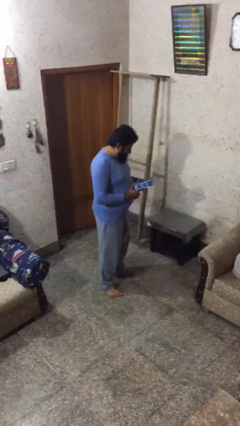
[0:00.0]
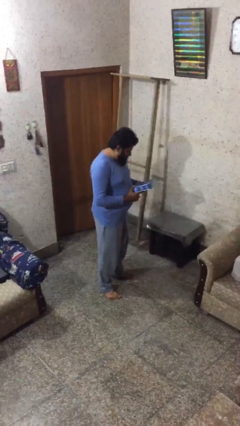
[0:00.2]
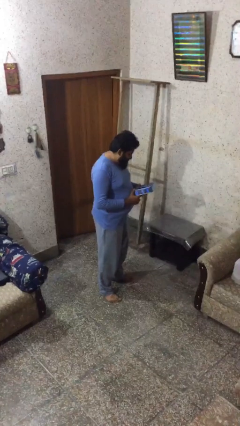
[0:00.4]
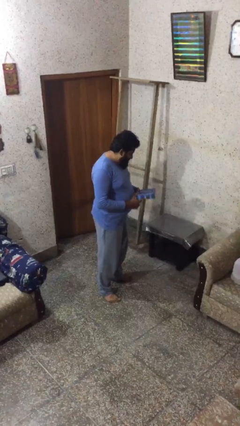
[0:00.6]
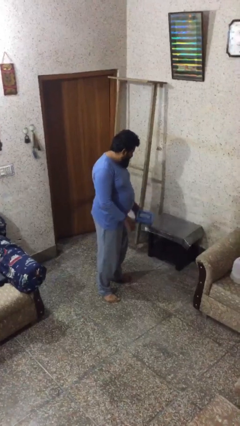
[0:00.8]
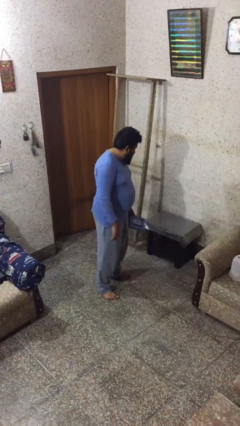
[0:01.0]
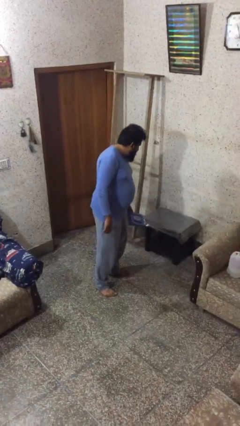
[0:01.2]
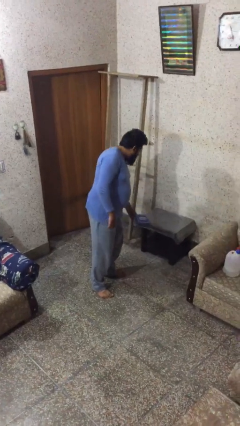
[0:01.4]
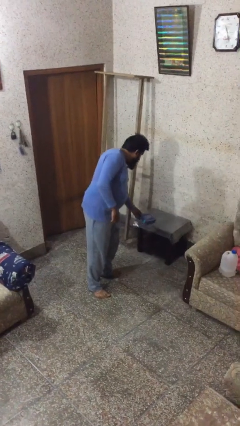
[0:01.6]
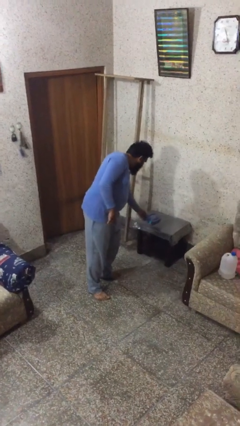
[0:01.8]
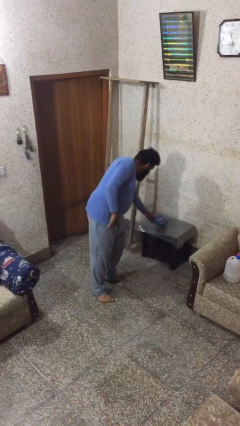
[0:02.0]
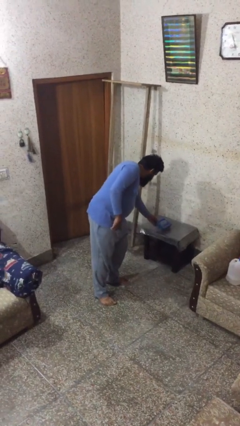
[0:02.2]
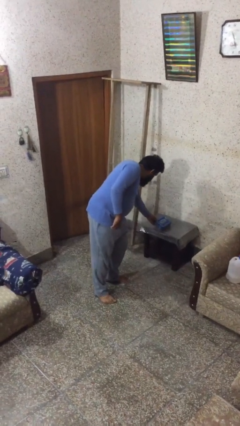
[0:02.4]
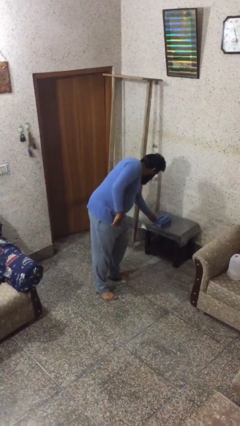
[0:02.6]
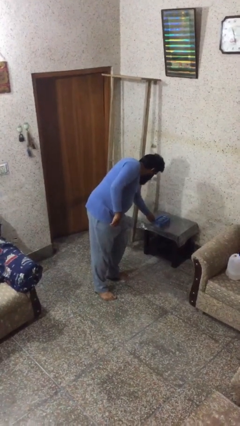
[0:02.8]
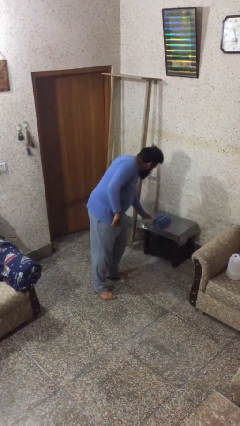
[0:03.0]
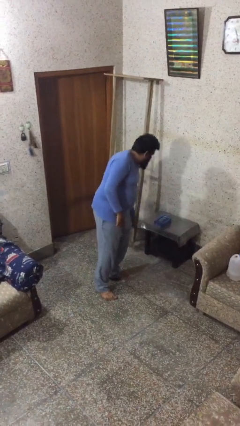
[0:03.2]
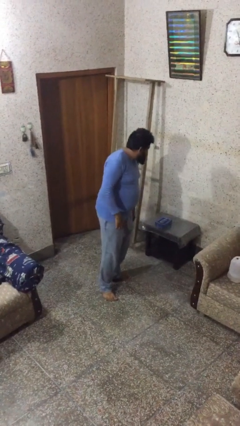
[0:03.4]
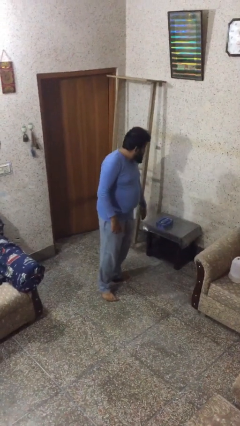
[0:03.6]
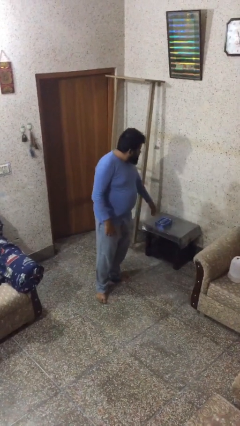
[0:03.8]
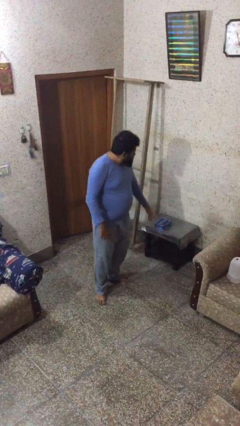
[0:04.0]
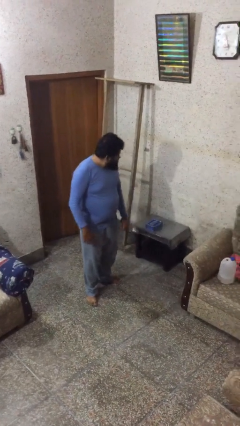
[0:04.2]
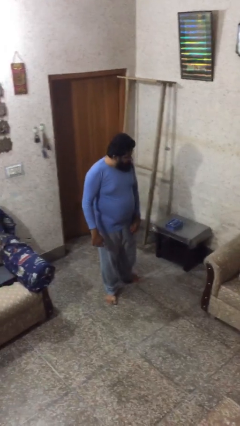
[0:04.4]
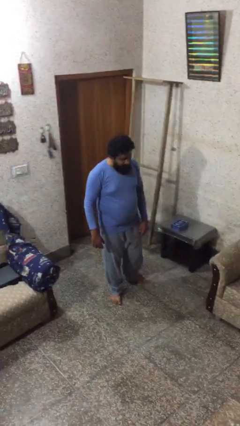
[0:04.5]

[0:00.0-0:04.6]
person puts down object on table

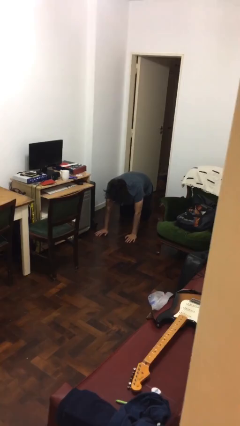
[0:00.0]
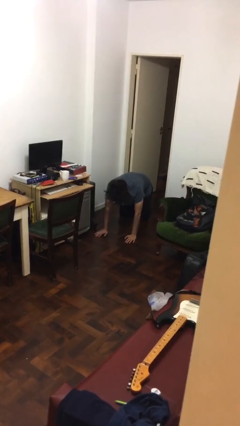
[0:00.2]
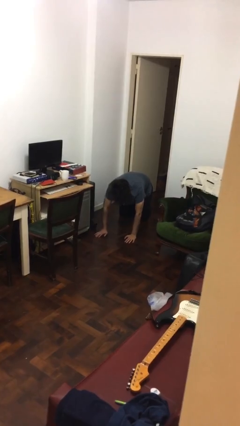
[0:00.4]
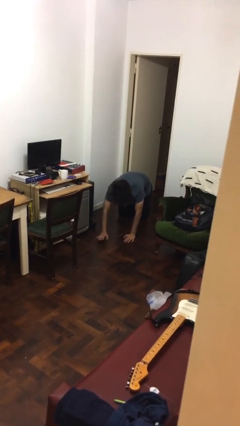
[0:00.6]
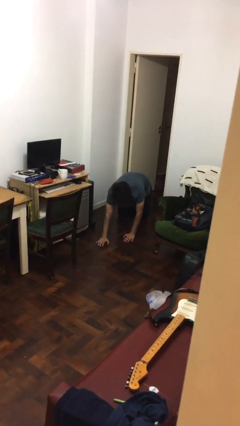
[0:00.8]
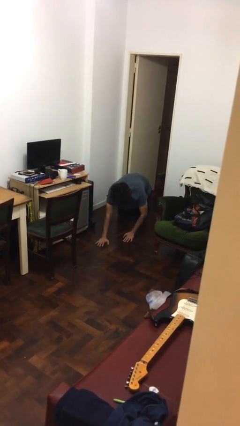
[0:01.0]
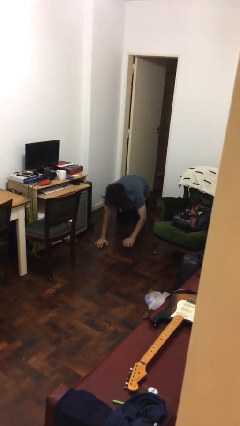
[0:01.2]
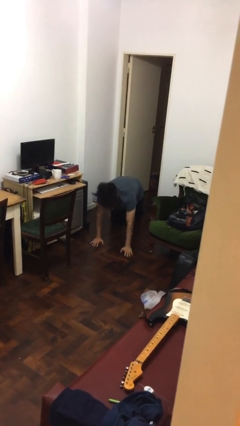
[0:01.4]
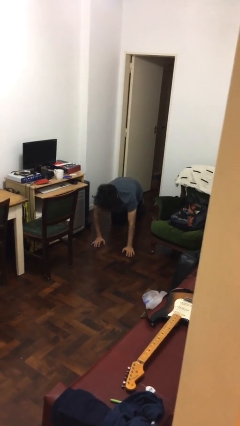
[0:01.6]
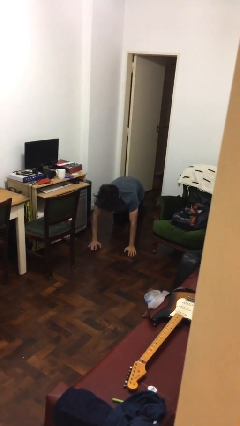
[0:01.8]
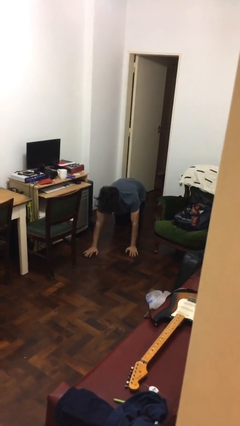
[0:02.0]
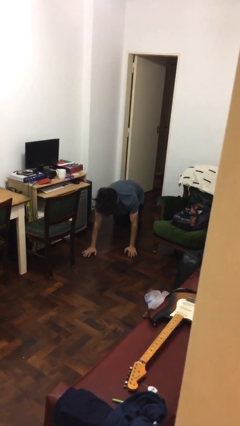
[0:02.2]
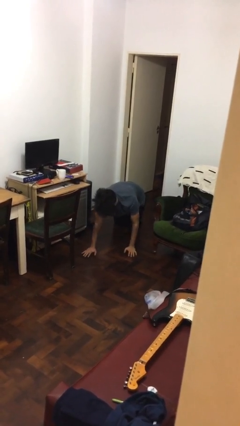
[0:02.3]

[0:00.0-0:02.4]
person crawls

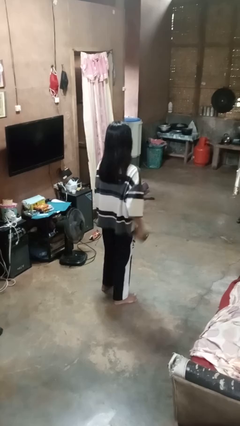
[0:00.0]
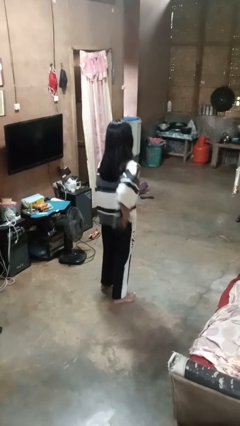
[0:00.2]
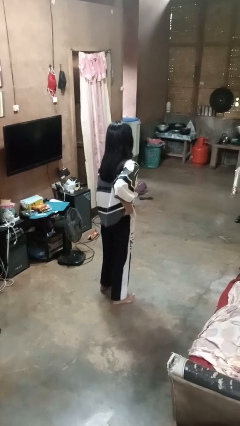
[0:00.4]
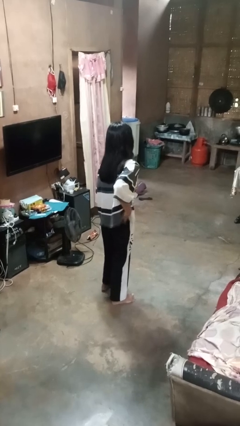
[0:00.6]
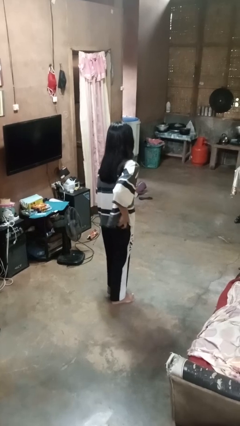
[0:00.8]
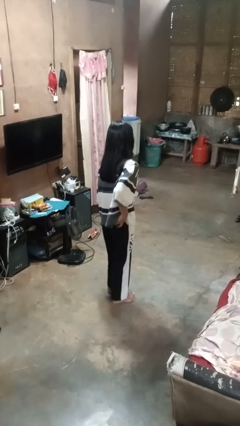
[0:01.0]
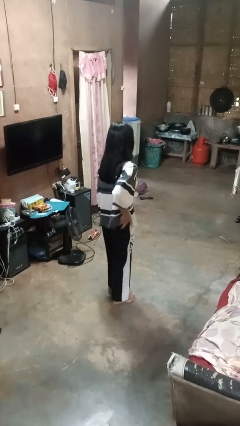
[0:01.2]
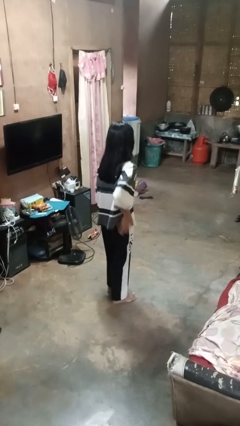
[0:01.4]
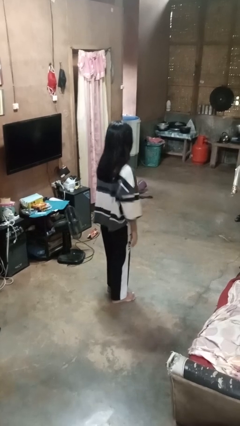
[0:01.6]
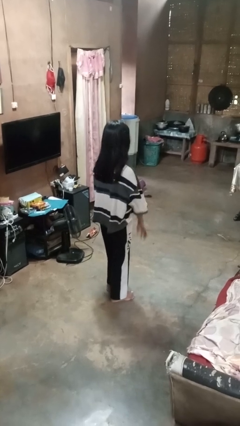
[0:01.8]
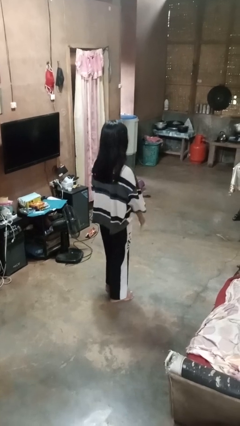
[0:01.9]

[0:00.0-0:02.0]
person puts phone into pocket

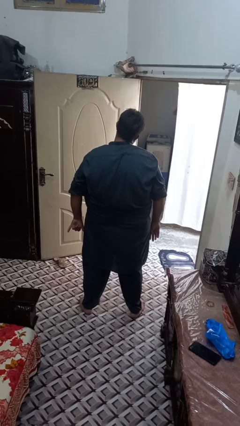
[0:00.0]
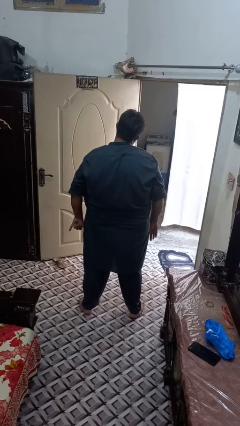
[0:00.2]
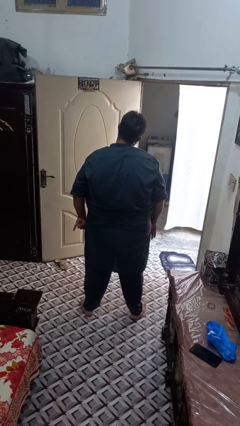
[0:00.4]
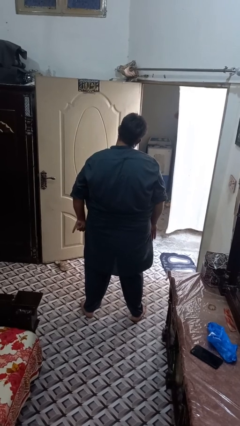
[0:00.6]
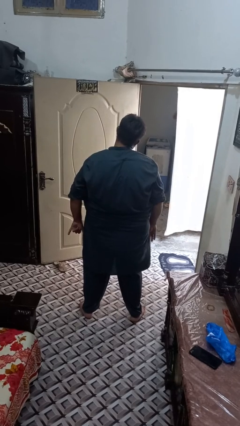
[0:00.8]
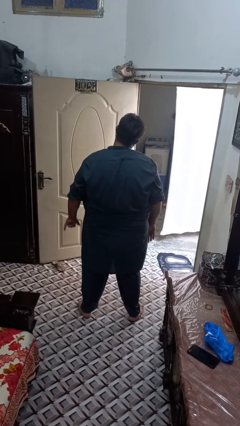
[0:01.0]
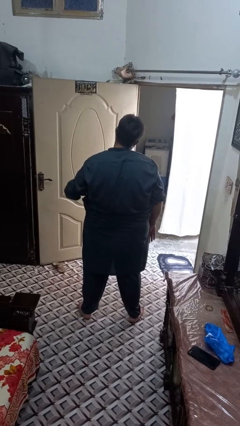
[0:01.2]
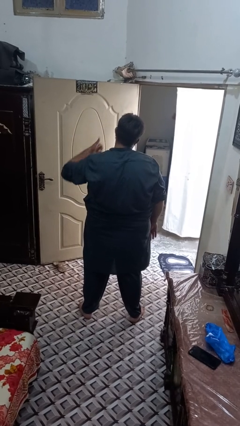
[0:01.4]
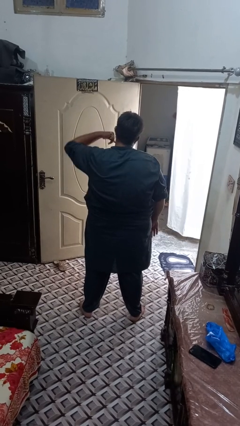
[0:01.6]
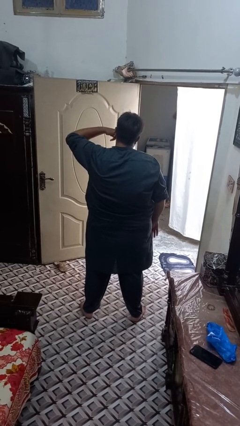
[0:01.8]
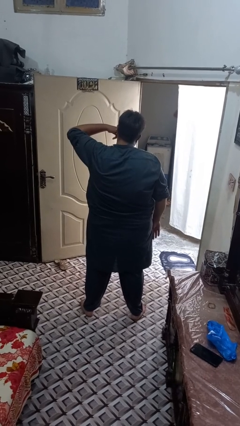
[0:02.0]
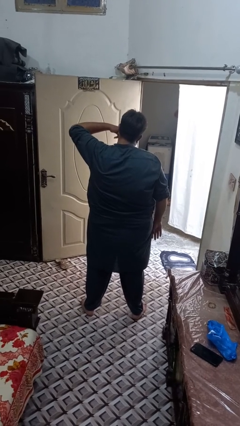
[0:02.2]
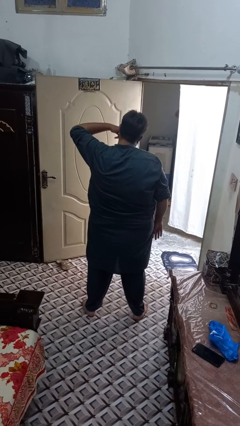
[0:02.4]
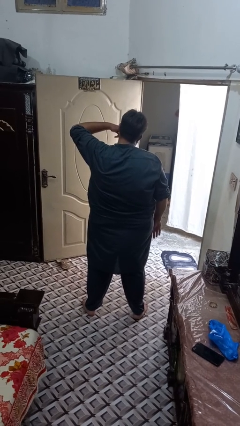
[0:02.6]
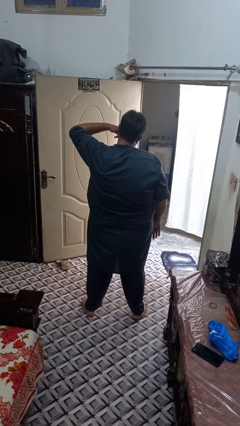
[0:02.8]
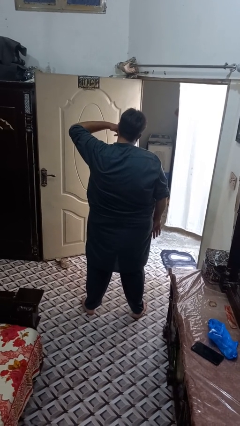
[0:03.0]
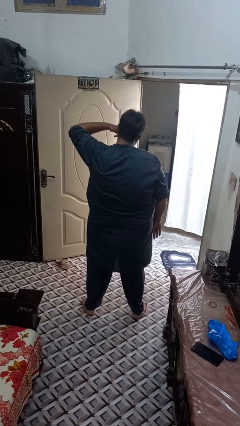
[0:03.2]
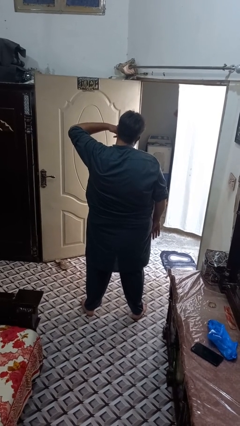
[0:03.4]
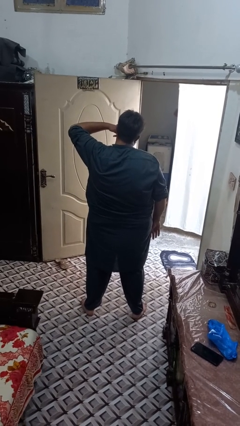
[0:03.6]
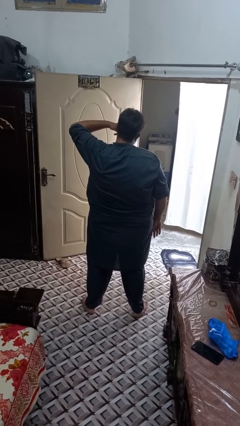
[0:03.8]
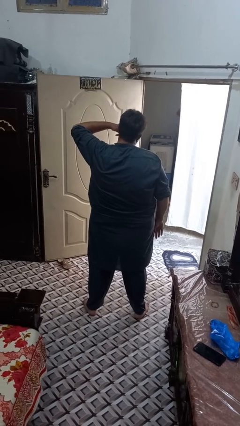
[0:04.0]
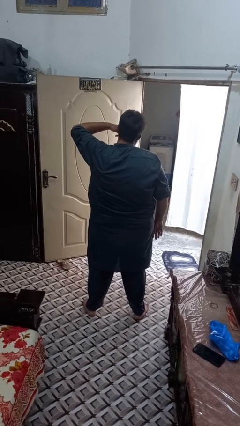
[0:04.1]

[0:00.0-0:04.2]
person gestures call me

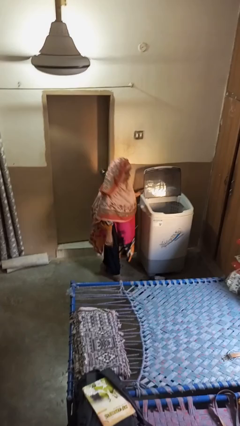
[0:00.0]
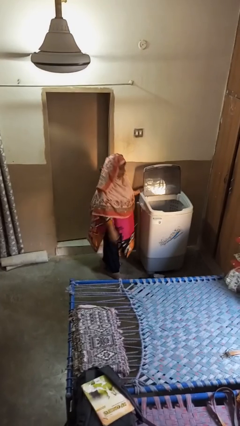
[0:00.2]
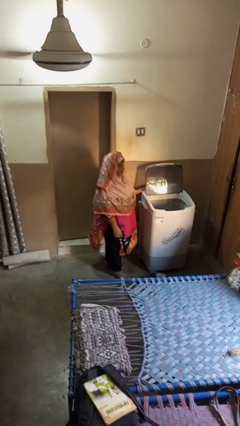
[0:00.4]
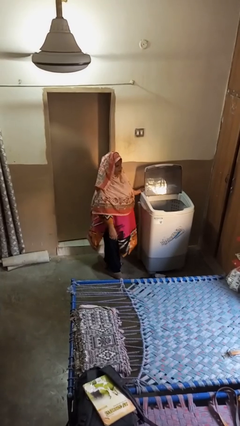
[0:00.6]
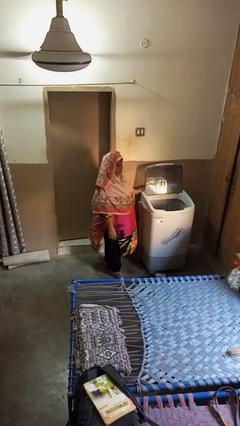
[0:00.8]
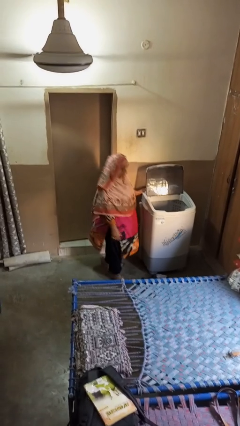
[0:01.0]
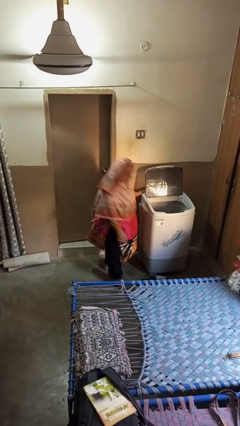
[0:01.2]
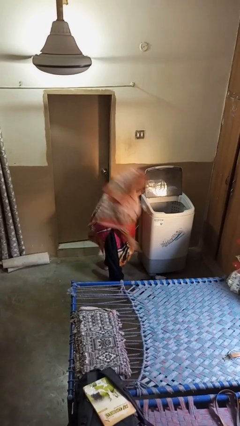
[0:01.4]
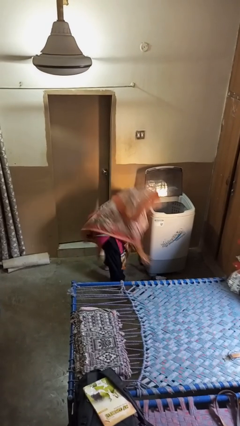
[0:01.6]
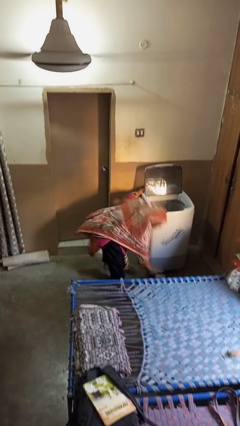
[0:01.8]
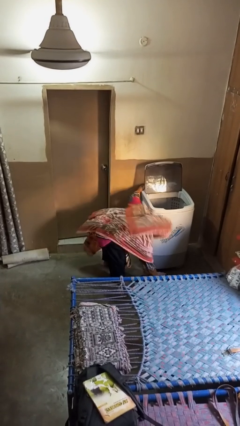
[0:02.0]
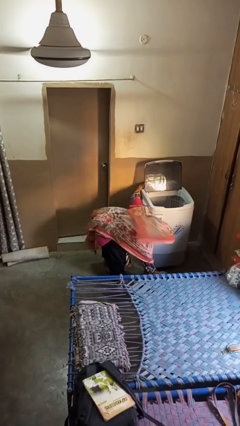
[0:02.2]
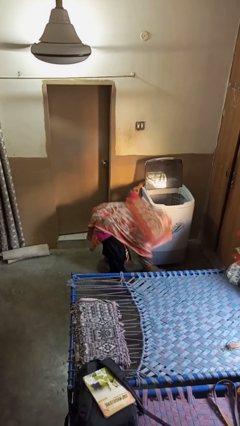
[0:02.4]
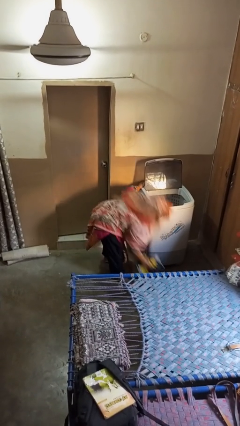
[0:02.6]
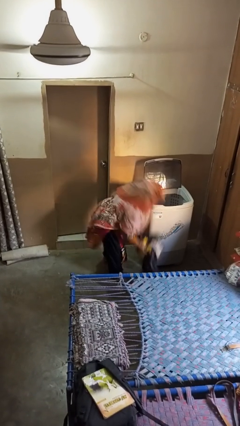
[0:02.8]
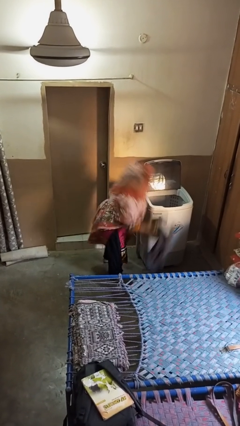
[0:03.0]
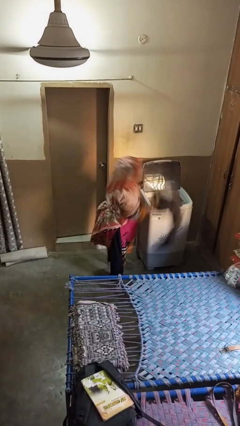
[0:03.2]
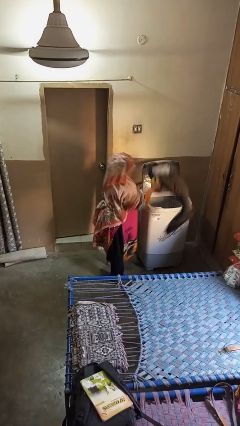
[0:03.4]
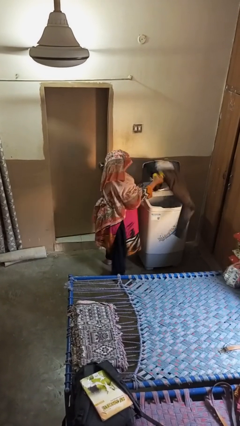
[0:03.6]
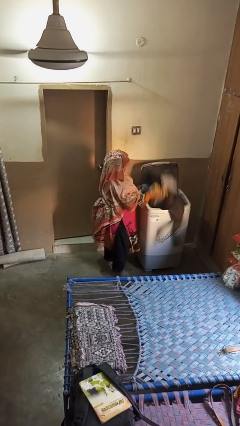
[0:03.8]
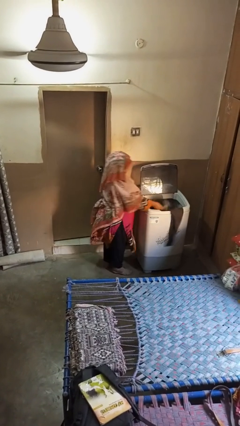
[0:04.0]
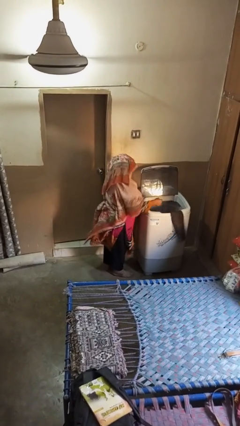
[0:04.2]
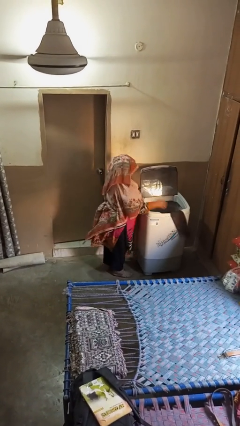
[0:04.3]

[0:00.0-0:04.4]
person loads clotheswasher

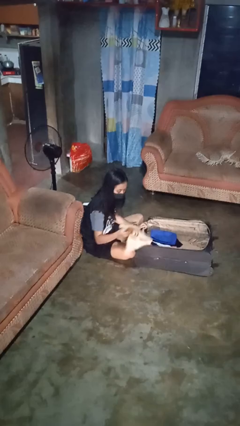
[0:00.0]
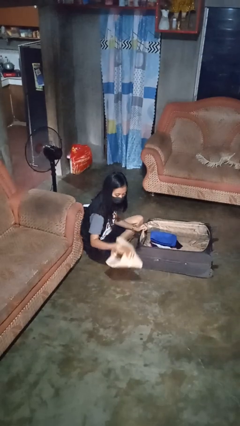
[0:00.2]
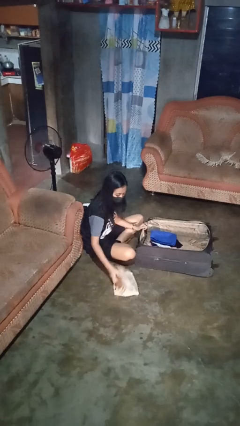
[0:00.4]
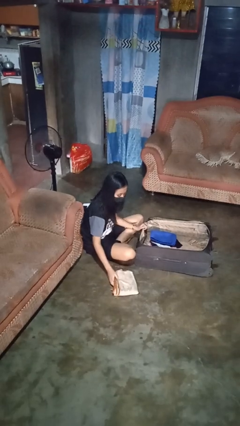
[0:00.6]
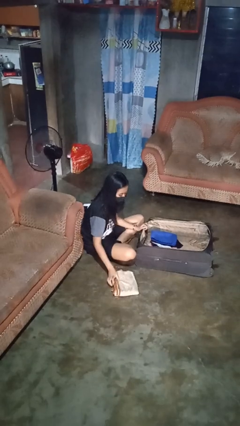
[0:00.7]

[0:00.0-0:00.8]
person unloads clothes from suitcase
